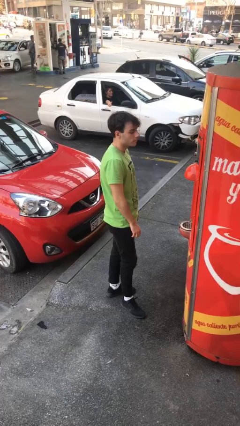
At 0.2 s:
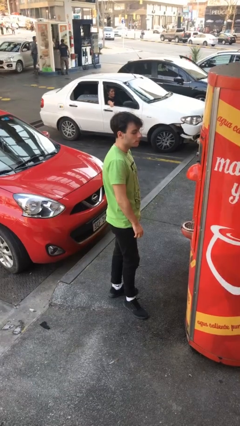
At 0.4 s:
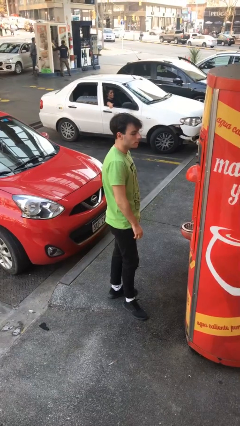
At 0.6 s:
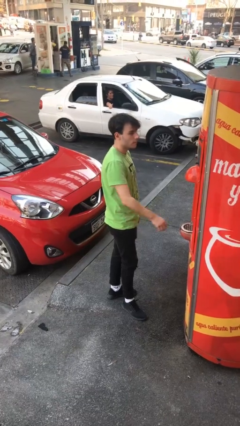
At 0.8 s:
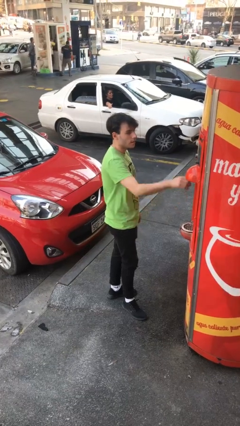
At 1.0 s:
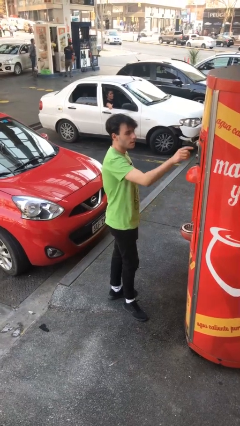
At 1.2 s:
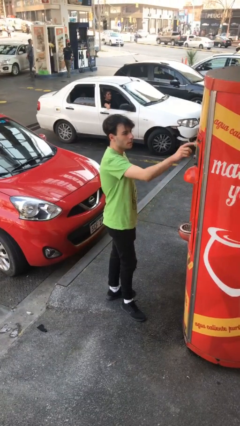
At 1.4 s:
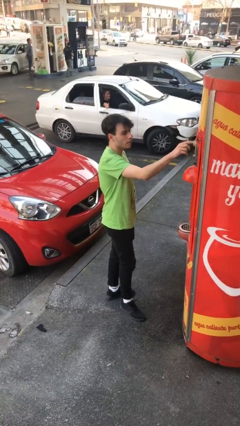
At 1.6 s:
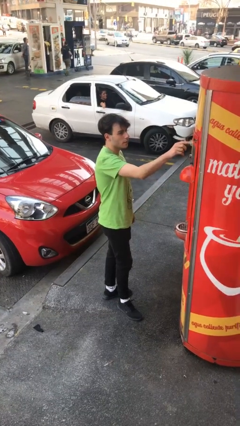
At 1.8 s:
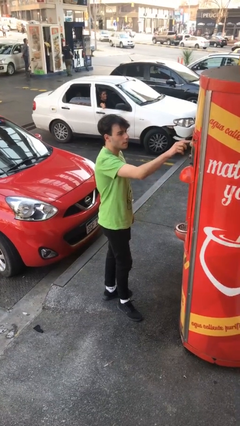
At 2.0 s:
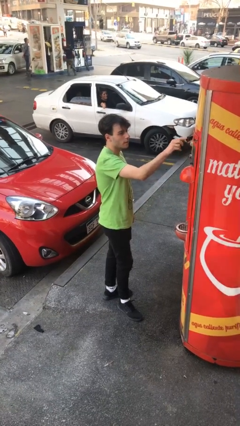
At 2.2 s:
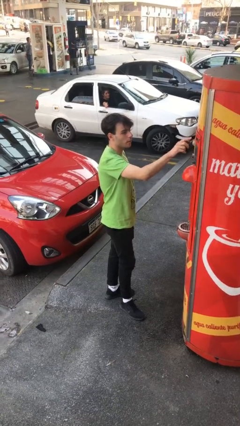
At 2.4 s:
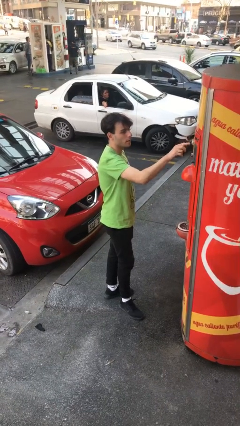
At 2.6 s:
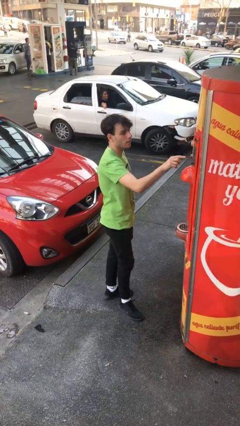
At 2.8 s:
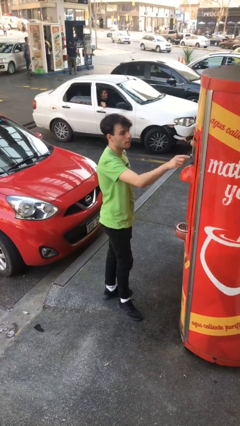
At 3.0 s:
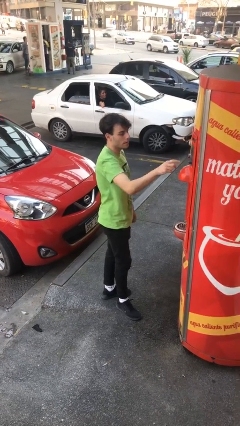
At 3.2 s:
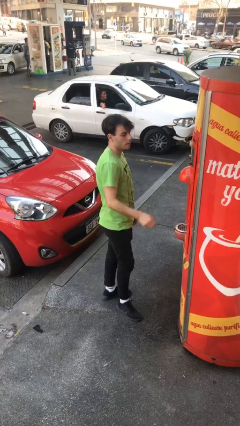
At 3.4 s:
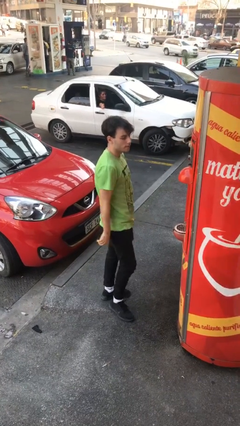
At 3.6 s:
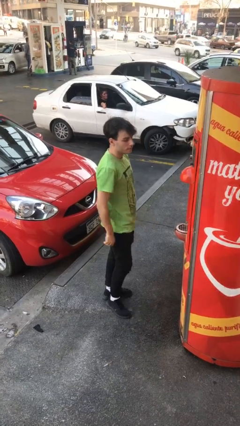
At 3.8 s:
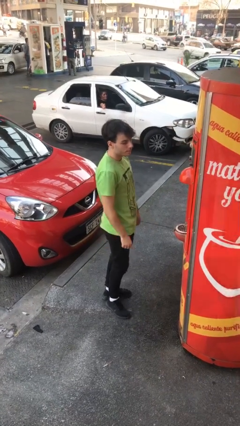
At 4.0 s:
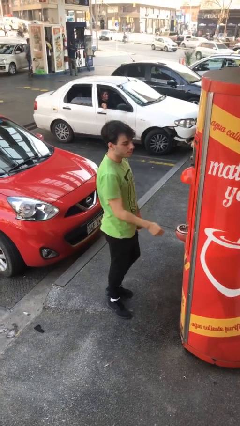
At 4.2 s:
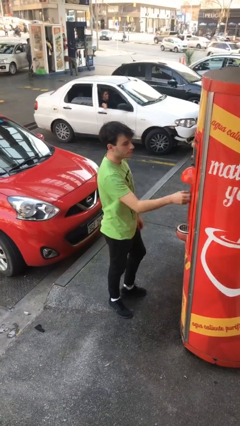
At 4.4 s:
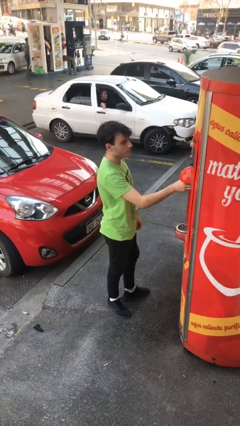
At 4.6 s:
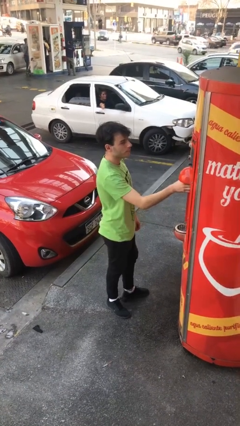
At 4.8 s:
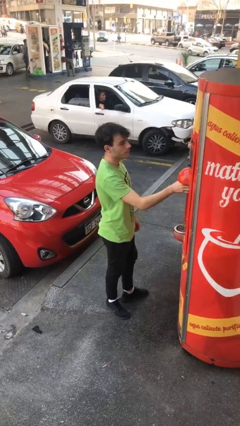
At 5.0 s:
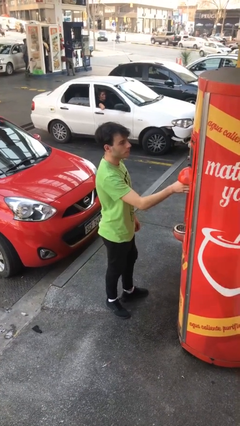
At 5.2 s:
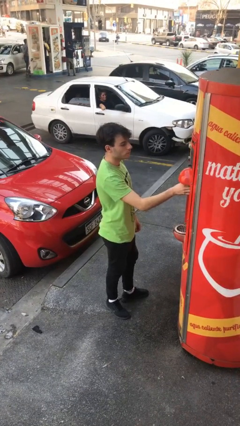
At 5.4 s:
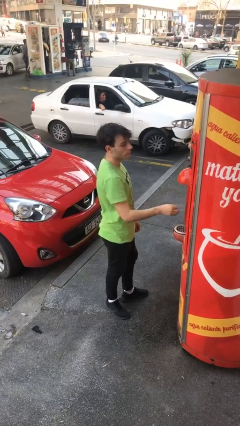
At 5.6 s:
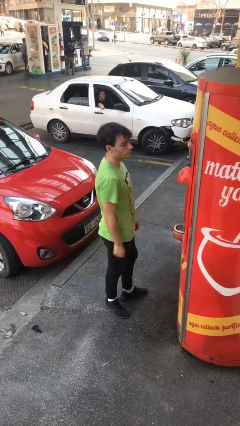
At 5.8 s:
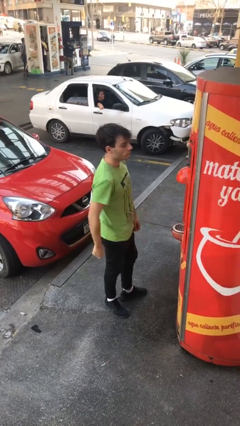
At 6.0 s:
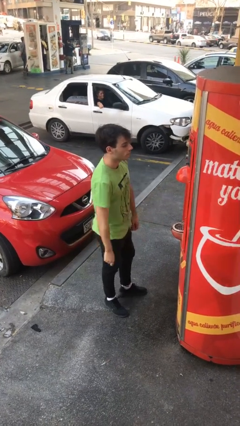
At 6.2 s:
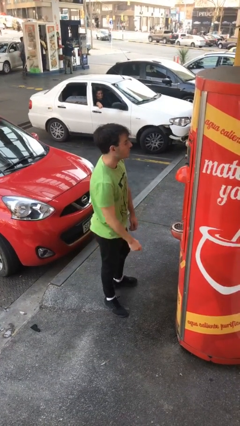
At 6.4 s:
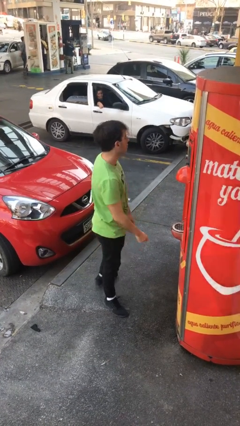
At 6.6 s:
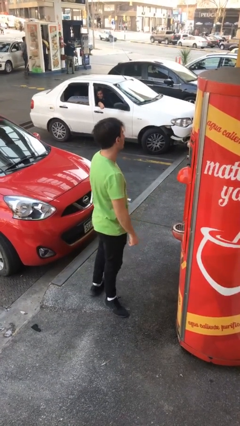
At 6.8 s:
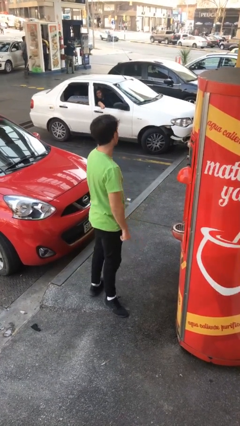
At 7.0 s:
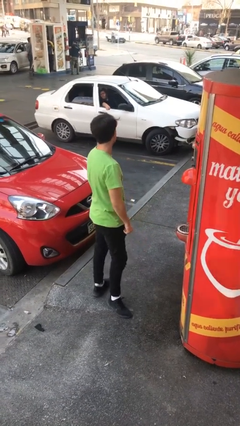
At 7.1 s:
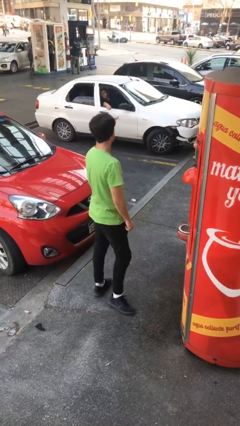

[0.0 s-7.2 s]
person purchases from machine

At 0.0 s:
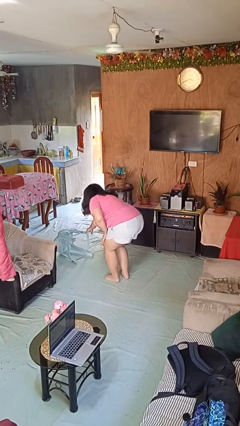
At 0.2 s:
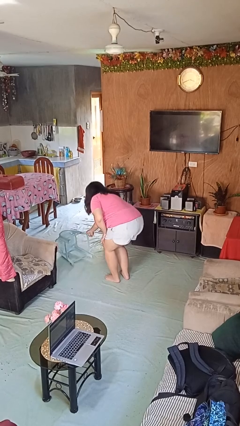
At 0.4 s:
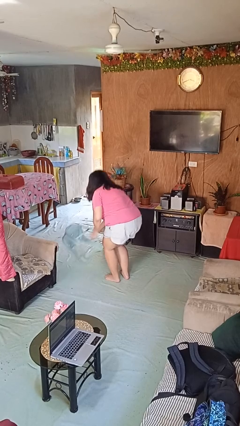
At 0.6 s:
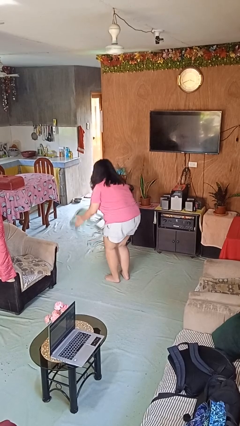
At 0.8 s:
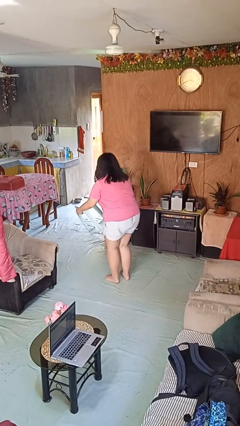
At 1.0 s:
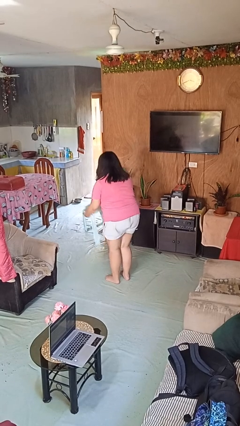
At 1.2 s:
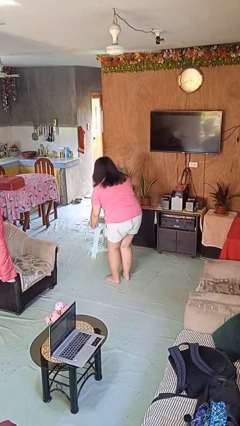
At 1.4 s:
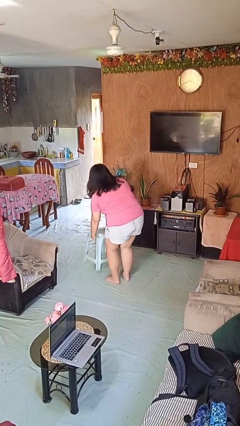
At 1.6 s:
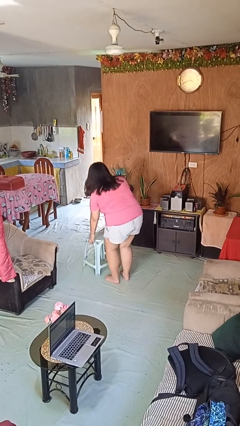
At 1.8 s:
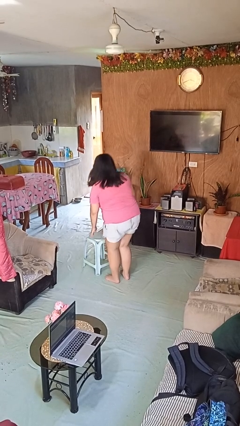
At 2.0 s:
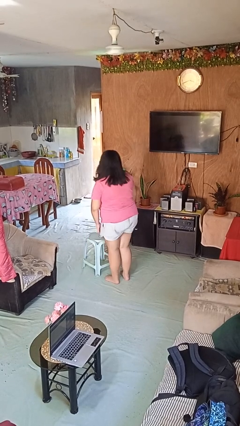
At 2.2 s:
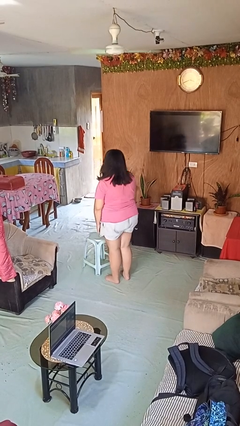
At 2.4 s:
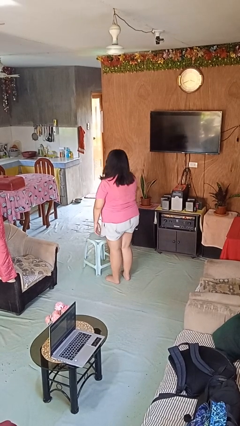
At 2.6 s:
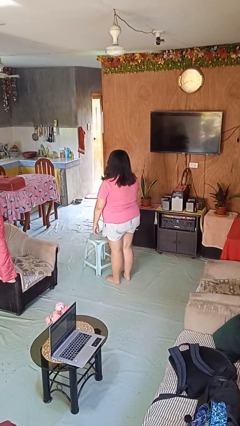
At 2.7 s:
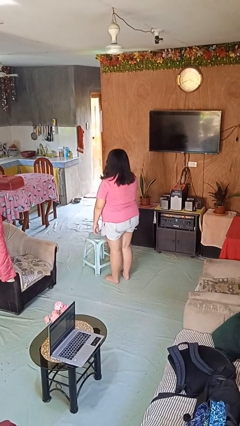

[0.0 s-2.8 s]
person sets upright furniture

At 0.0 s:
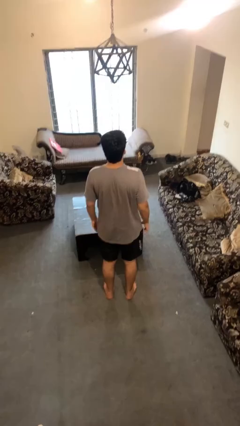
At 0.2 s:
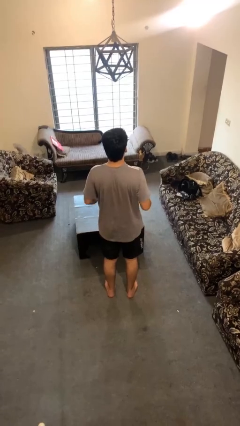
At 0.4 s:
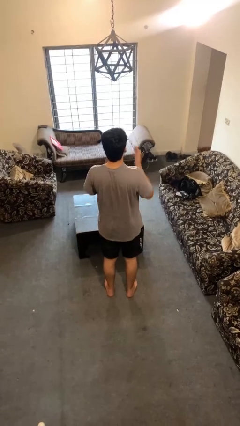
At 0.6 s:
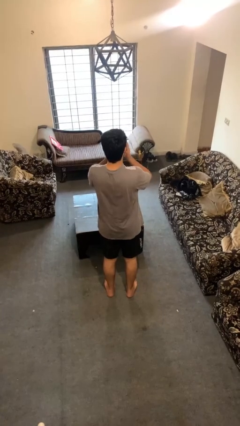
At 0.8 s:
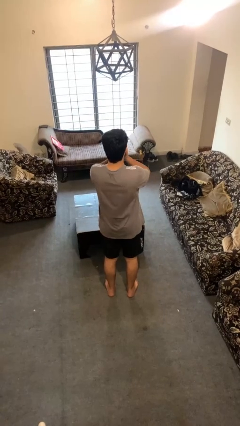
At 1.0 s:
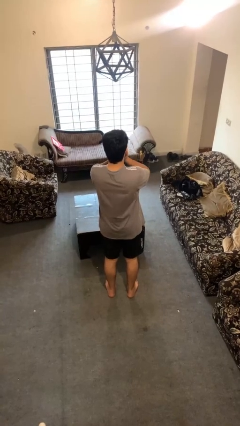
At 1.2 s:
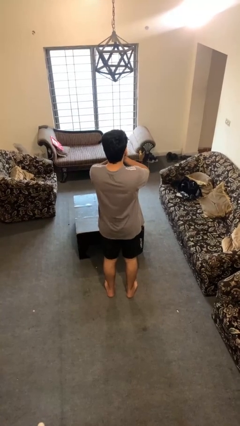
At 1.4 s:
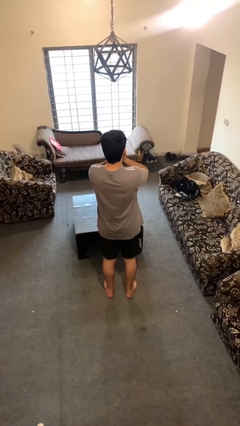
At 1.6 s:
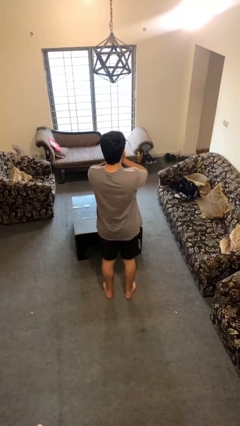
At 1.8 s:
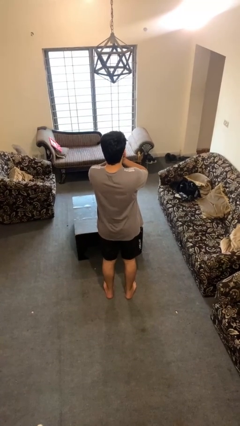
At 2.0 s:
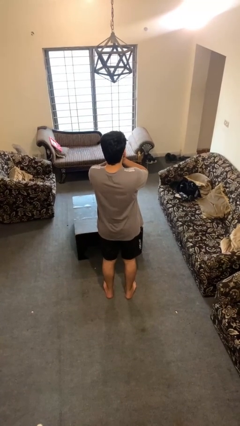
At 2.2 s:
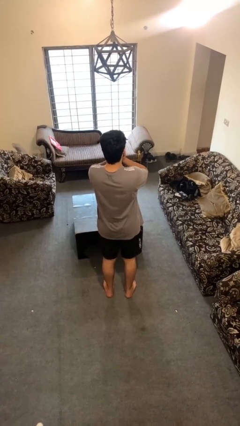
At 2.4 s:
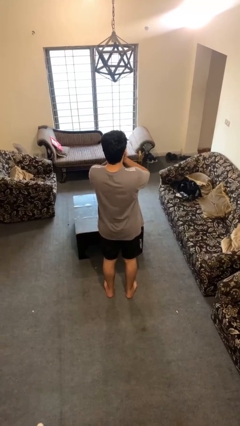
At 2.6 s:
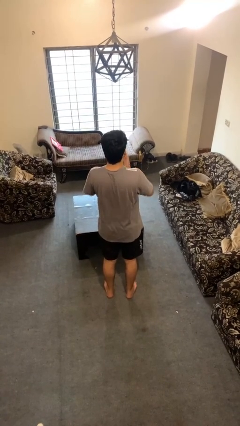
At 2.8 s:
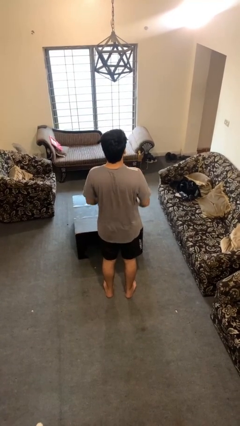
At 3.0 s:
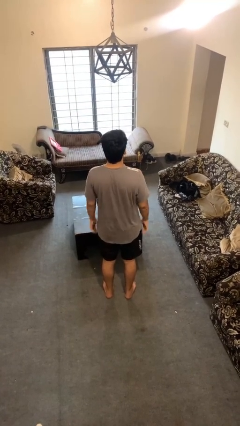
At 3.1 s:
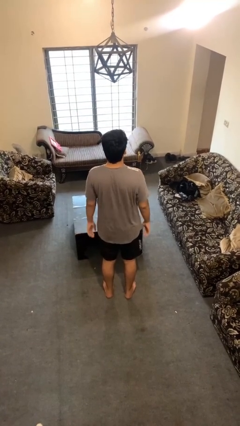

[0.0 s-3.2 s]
person covers face with hands

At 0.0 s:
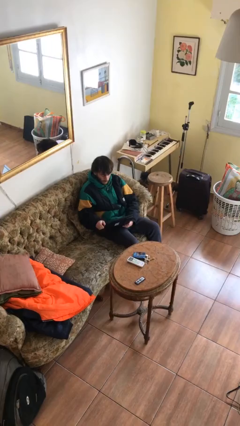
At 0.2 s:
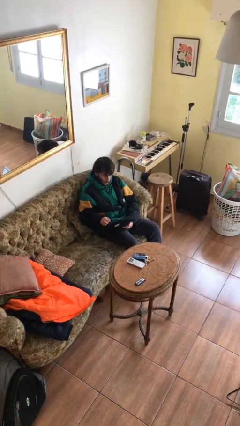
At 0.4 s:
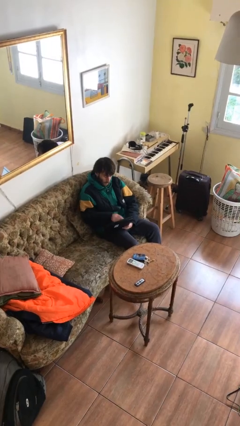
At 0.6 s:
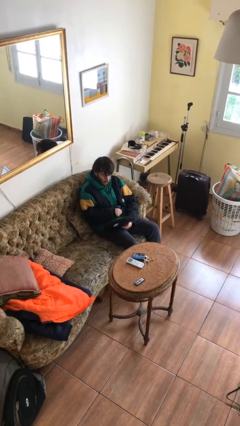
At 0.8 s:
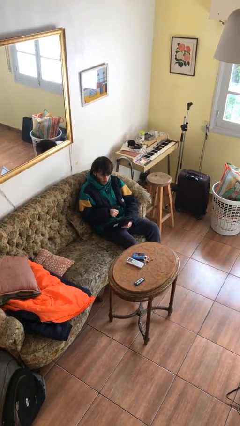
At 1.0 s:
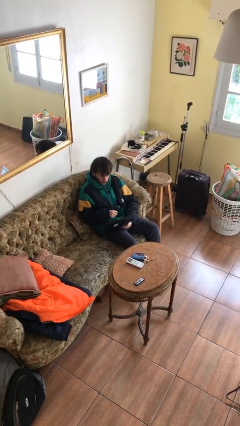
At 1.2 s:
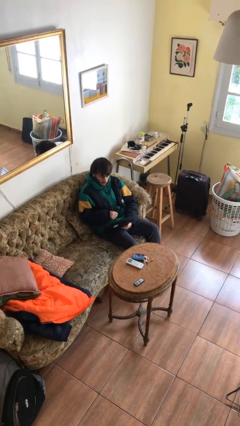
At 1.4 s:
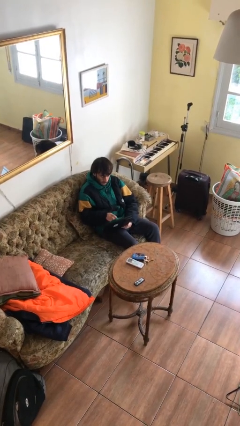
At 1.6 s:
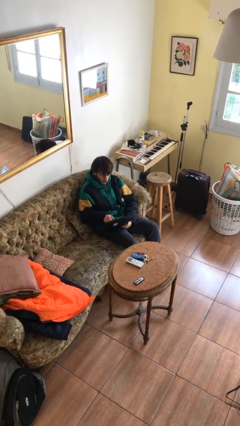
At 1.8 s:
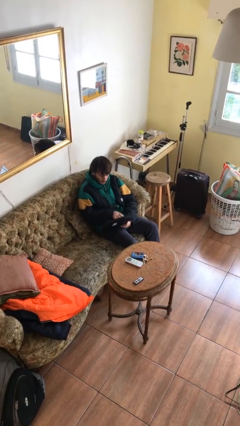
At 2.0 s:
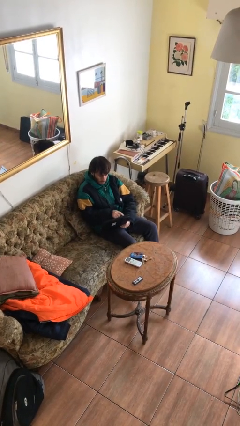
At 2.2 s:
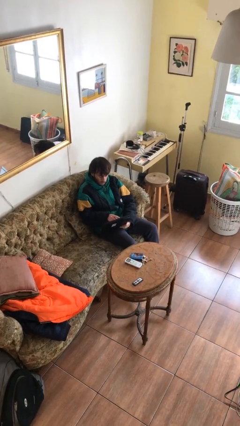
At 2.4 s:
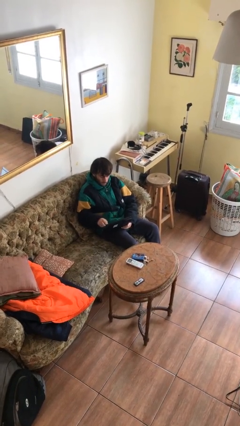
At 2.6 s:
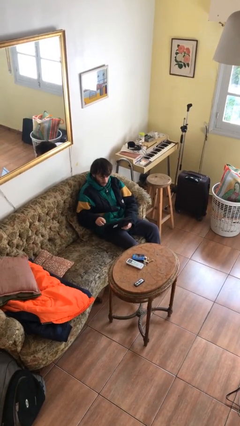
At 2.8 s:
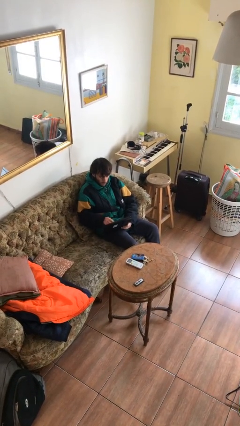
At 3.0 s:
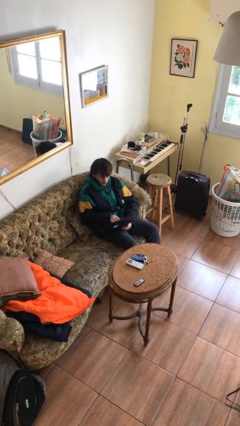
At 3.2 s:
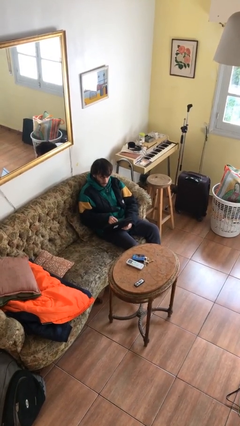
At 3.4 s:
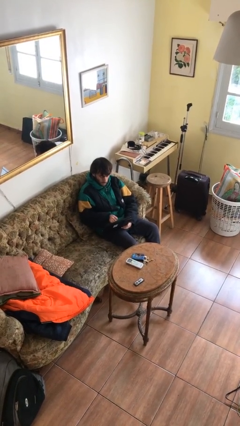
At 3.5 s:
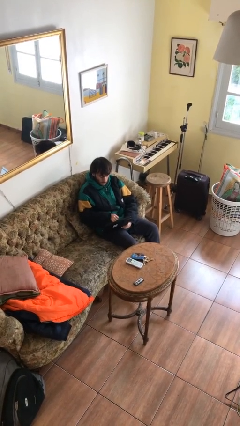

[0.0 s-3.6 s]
person interacts with tablet

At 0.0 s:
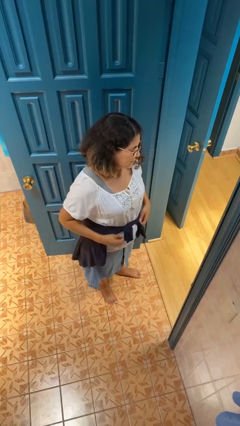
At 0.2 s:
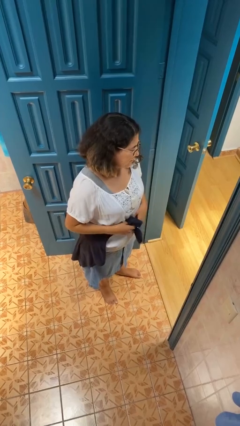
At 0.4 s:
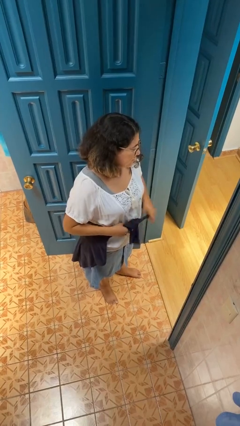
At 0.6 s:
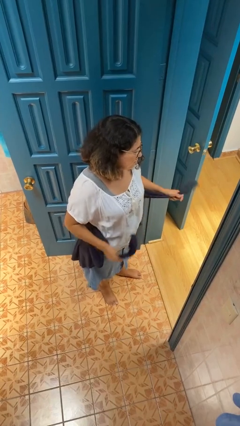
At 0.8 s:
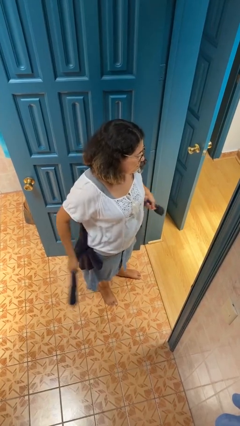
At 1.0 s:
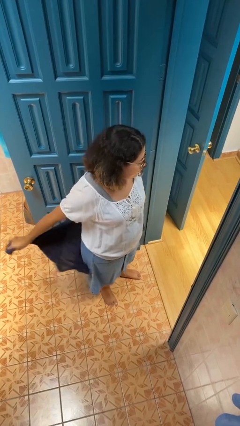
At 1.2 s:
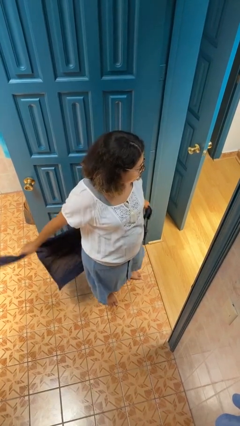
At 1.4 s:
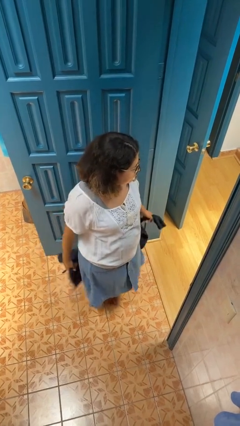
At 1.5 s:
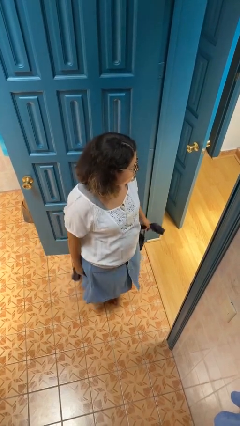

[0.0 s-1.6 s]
person unties jacket around waist
